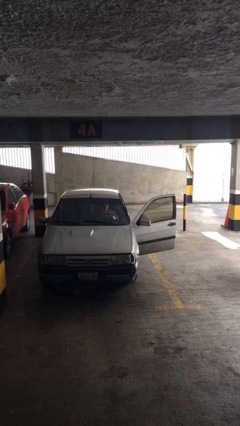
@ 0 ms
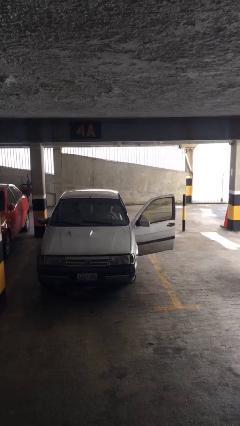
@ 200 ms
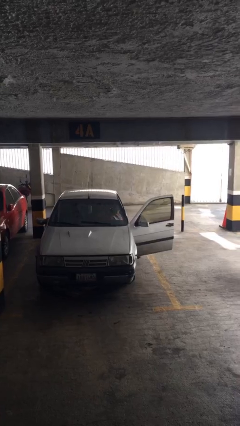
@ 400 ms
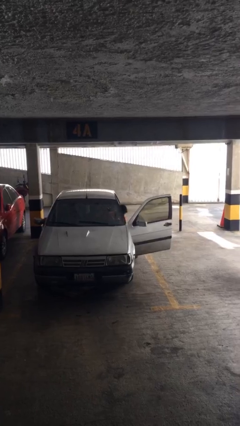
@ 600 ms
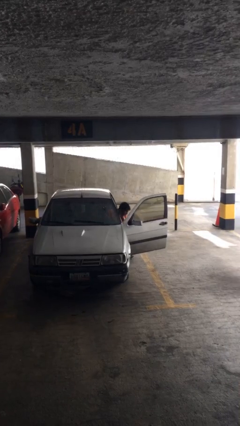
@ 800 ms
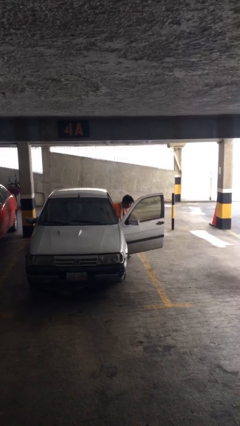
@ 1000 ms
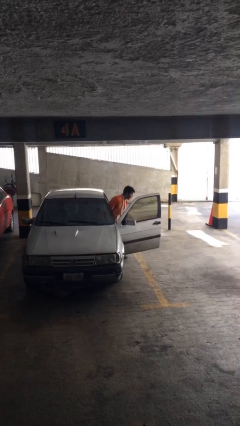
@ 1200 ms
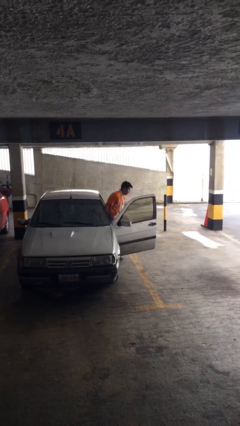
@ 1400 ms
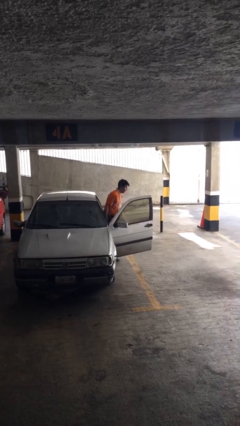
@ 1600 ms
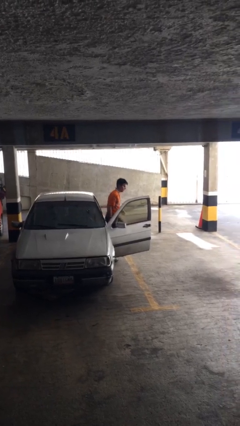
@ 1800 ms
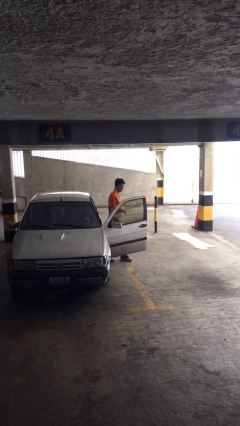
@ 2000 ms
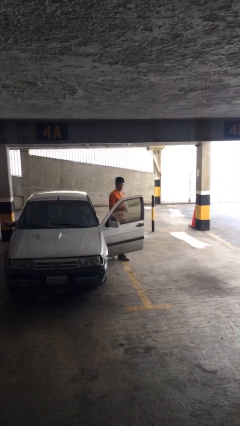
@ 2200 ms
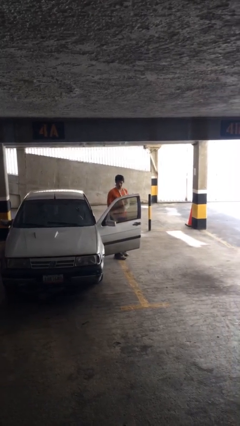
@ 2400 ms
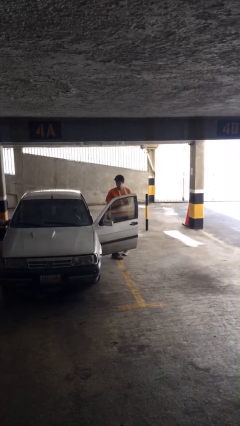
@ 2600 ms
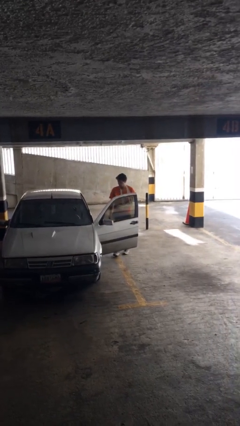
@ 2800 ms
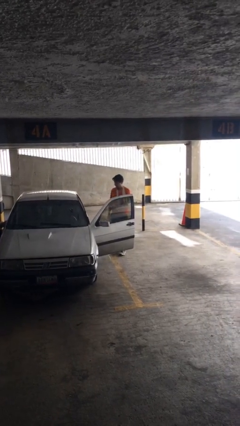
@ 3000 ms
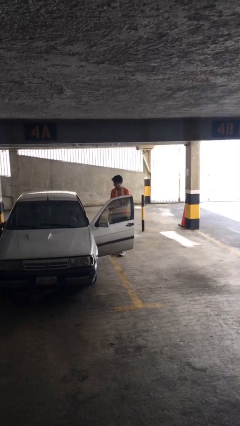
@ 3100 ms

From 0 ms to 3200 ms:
person exits car

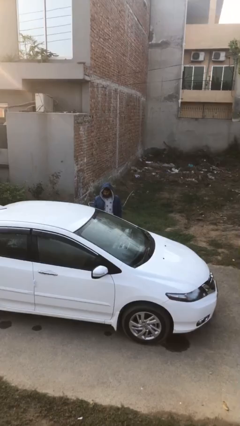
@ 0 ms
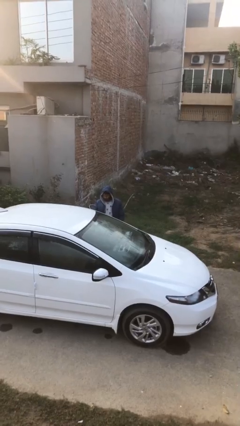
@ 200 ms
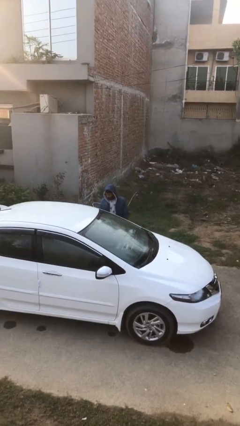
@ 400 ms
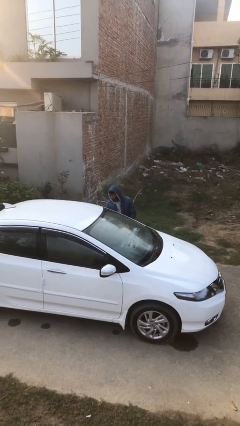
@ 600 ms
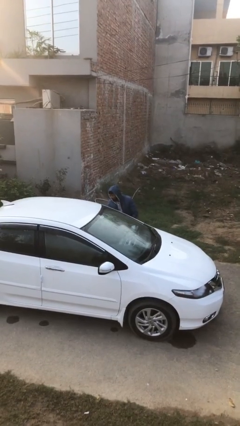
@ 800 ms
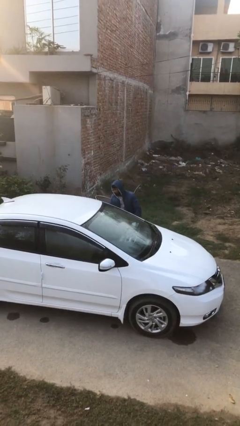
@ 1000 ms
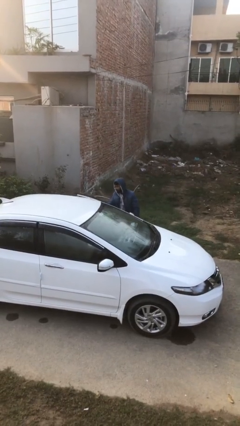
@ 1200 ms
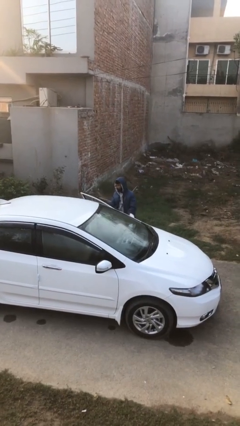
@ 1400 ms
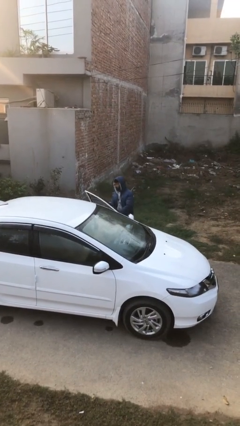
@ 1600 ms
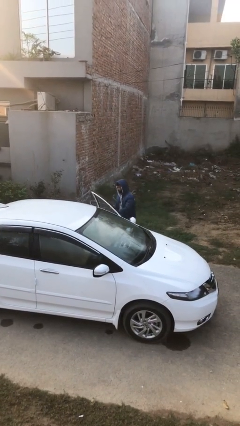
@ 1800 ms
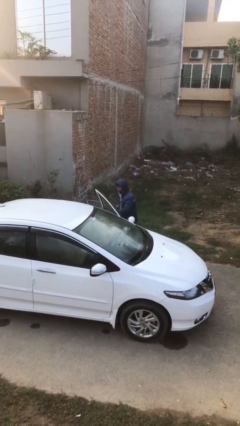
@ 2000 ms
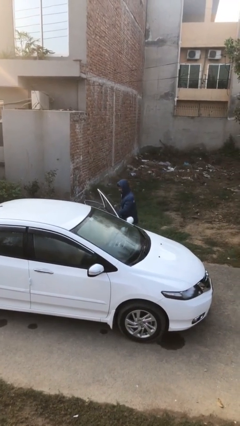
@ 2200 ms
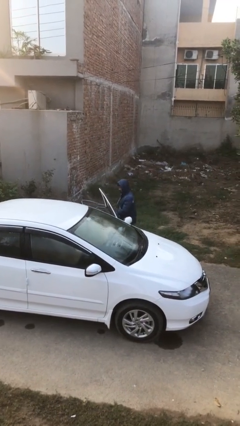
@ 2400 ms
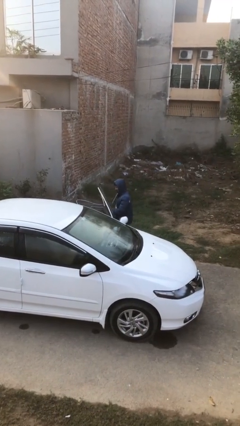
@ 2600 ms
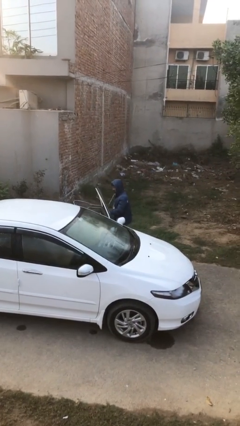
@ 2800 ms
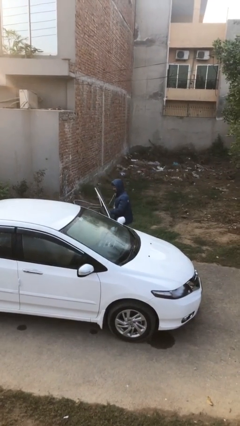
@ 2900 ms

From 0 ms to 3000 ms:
person opens car door

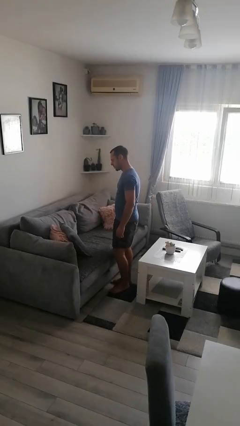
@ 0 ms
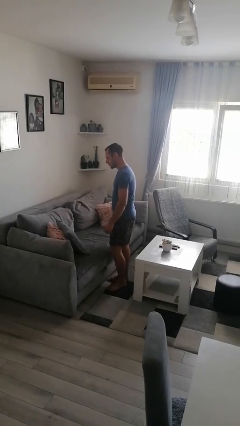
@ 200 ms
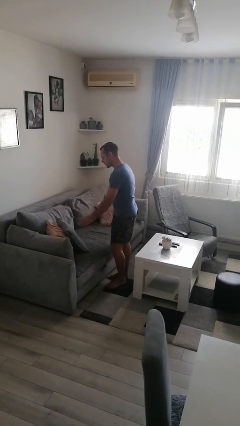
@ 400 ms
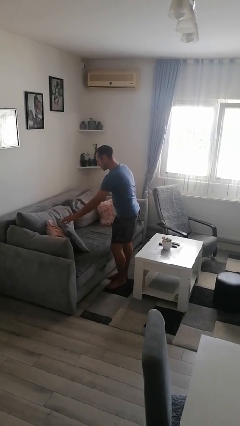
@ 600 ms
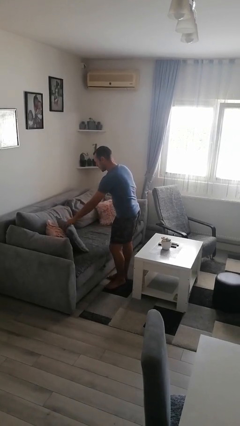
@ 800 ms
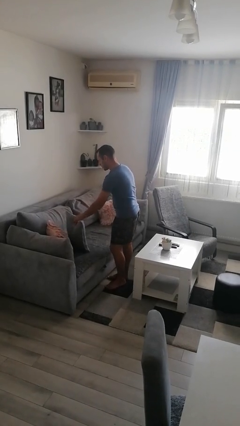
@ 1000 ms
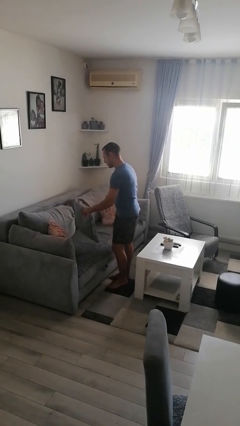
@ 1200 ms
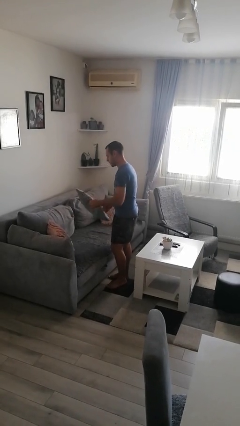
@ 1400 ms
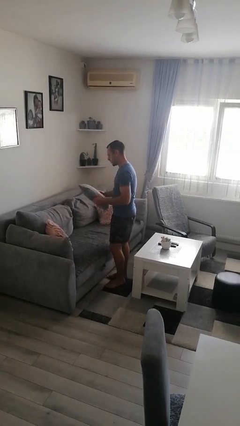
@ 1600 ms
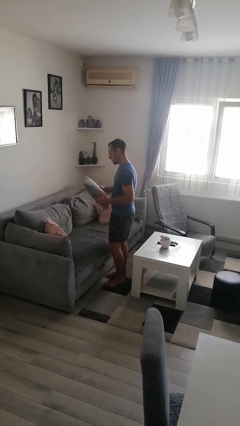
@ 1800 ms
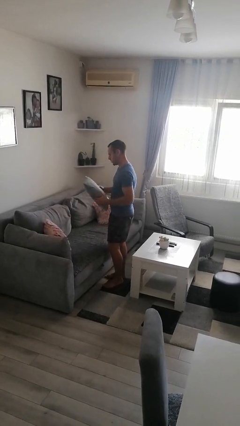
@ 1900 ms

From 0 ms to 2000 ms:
person picks up object from couch

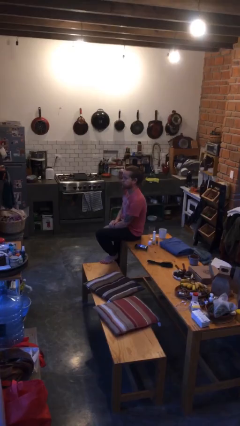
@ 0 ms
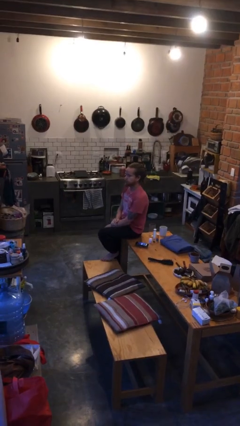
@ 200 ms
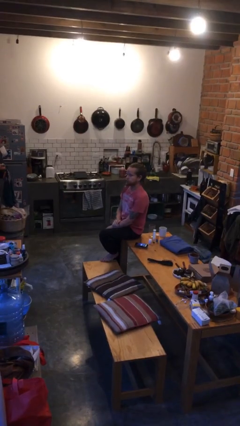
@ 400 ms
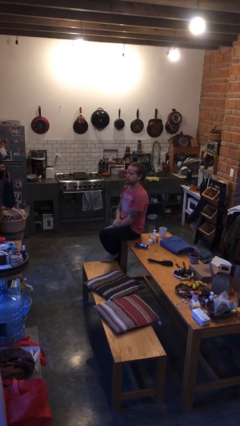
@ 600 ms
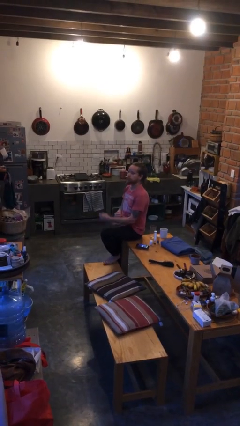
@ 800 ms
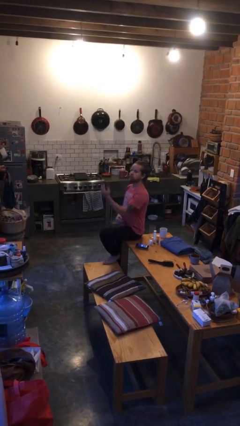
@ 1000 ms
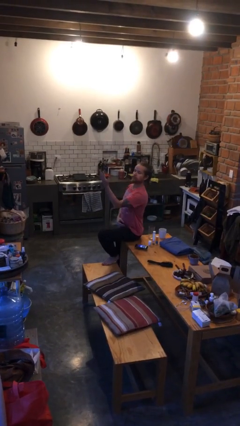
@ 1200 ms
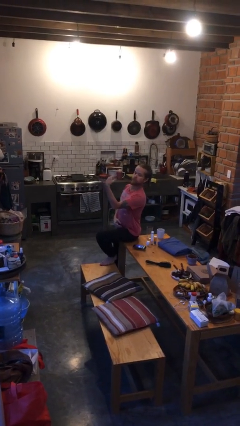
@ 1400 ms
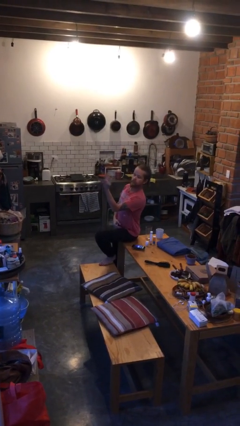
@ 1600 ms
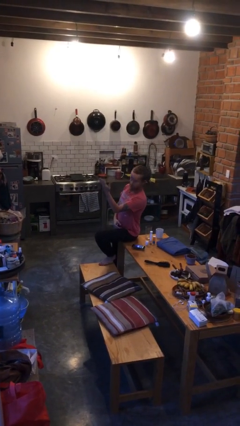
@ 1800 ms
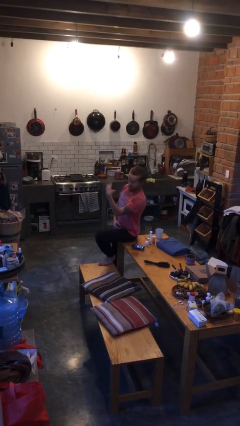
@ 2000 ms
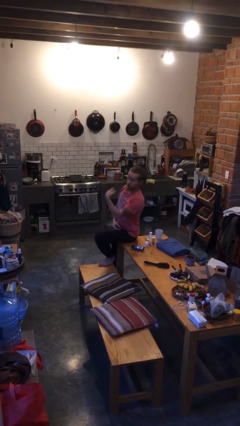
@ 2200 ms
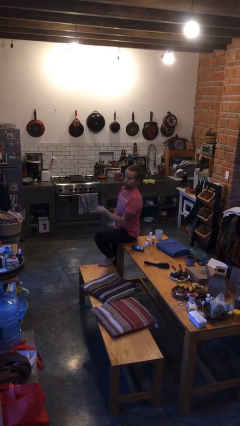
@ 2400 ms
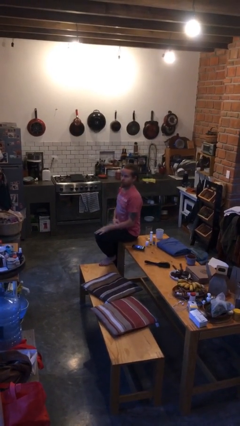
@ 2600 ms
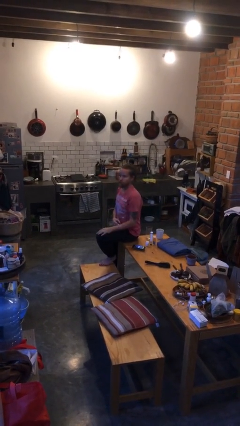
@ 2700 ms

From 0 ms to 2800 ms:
person gestures come here

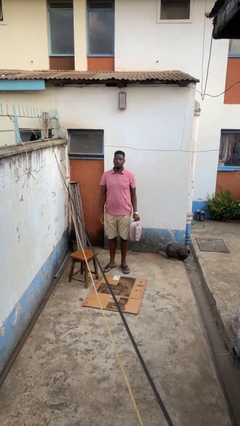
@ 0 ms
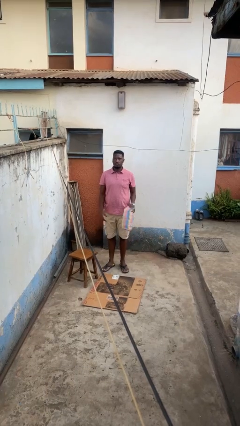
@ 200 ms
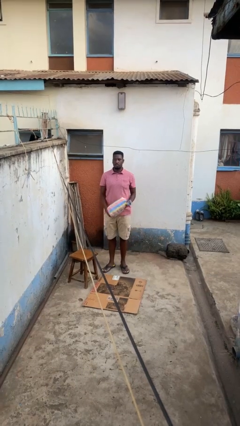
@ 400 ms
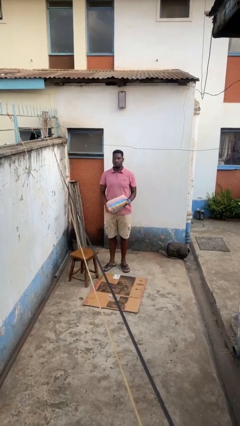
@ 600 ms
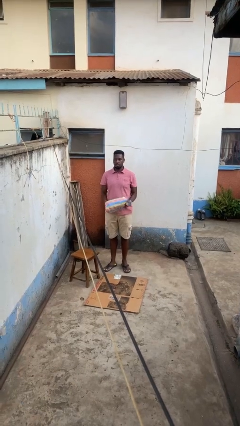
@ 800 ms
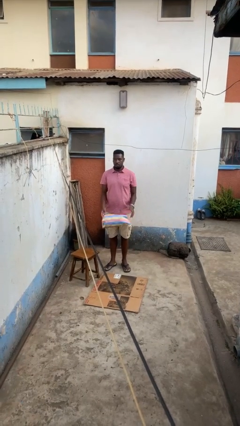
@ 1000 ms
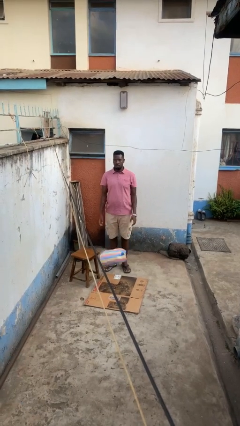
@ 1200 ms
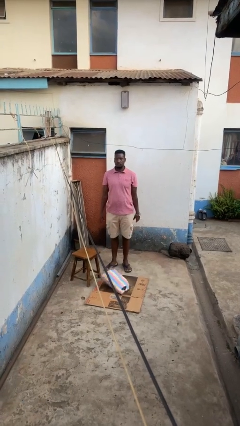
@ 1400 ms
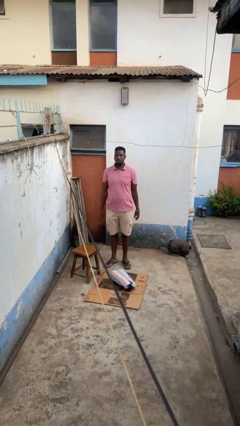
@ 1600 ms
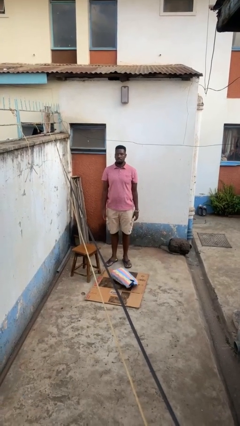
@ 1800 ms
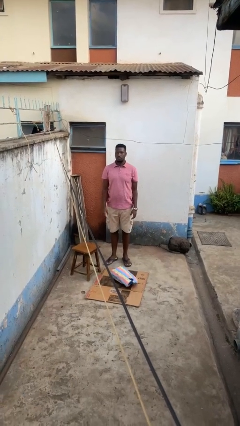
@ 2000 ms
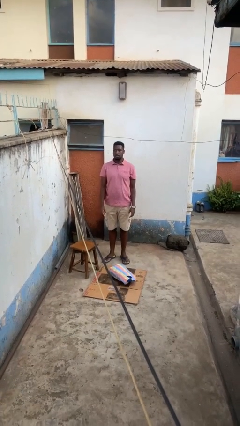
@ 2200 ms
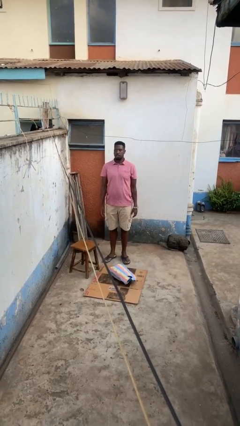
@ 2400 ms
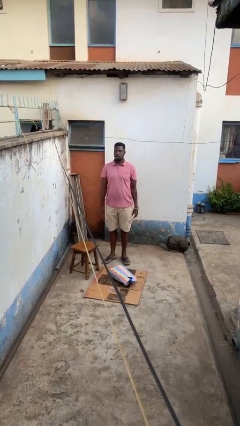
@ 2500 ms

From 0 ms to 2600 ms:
person drops object

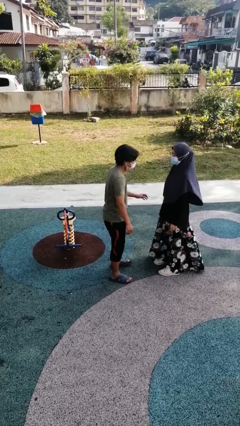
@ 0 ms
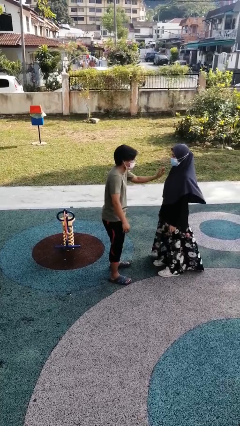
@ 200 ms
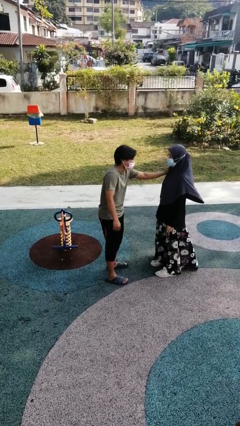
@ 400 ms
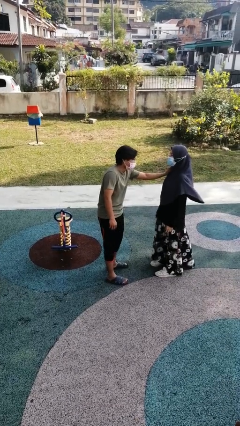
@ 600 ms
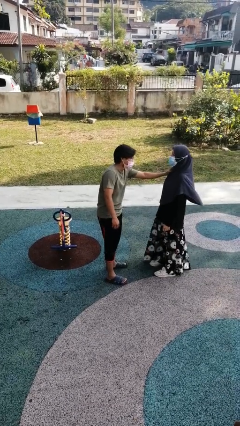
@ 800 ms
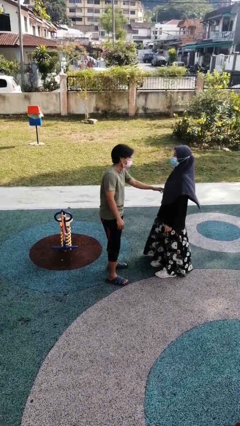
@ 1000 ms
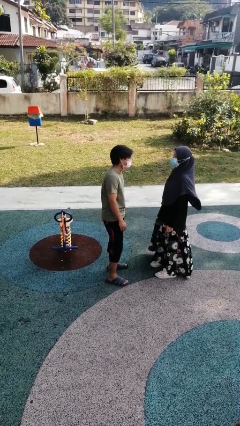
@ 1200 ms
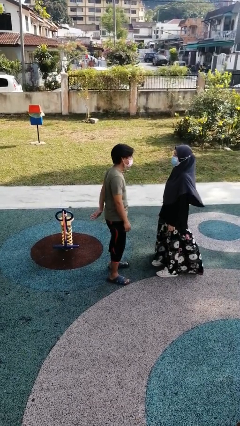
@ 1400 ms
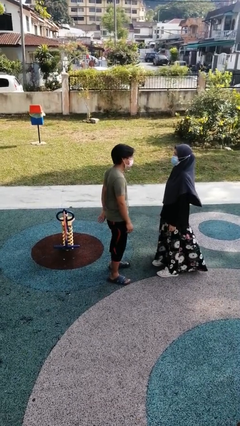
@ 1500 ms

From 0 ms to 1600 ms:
person shoves person

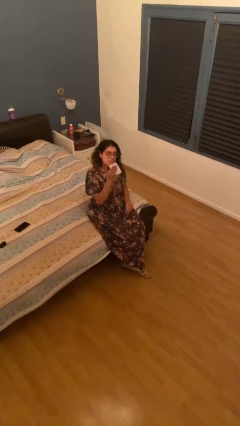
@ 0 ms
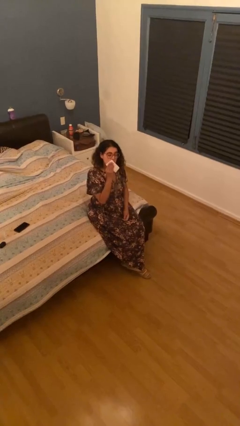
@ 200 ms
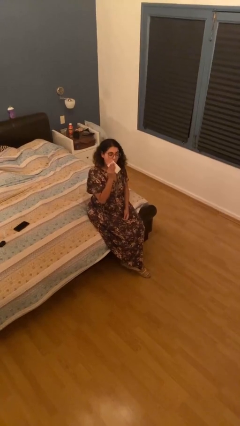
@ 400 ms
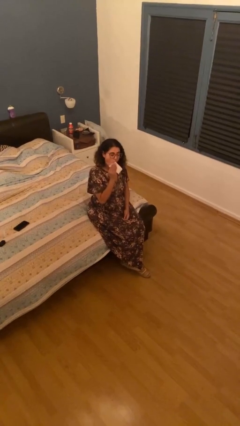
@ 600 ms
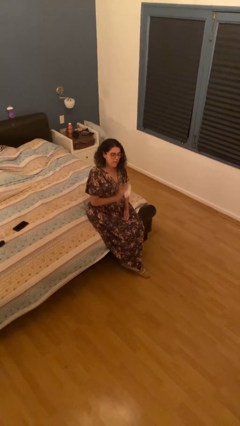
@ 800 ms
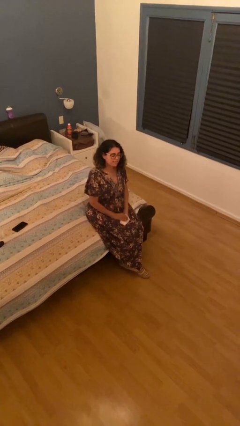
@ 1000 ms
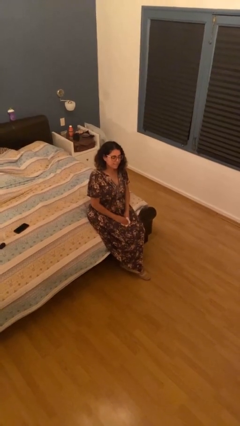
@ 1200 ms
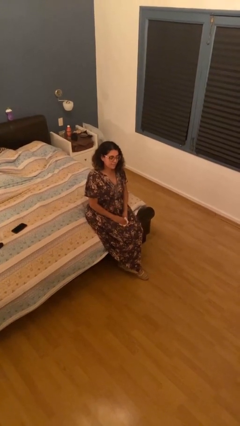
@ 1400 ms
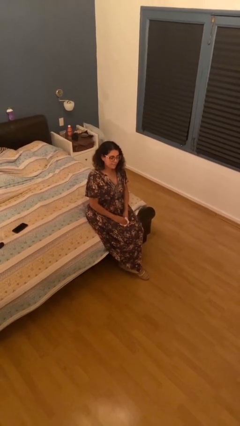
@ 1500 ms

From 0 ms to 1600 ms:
person wipes mouth with napkin

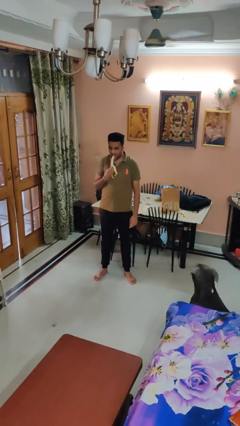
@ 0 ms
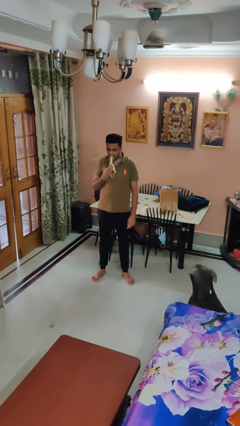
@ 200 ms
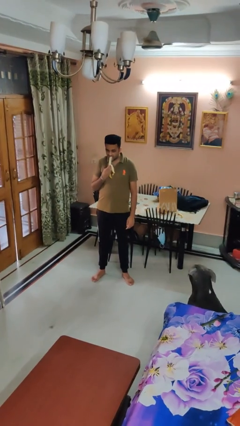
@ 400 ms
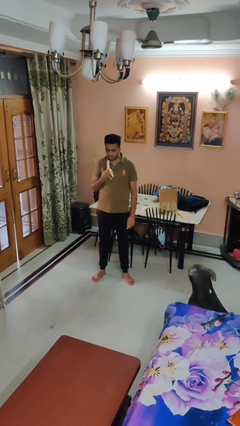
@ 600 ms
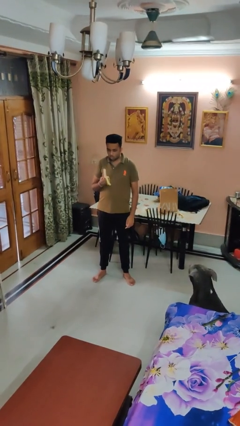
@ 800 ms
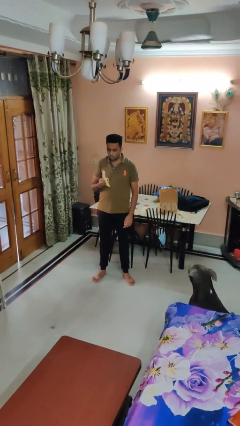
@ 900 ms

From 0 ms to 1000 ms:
person eats banana
